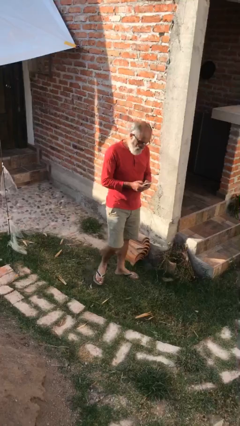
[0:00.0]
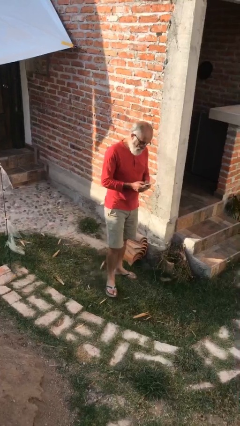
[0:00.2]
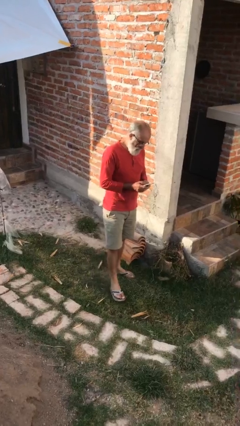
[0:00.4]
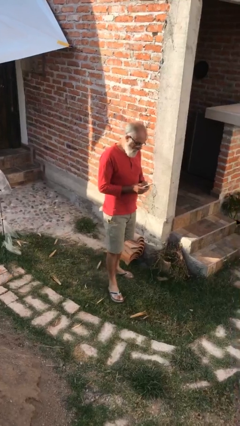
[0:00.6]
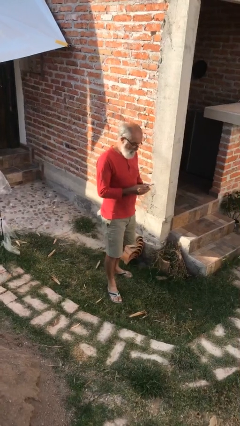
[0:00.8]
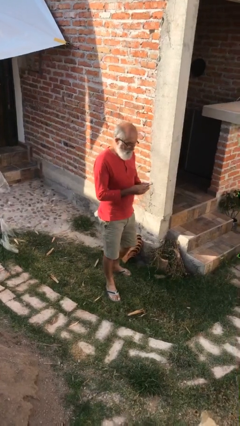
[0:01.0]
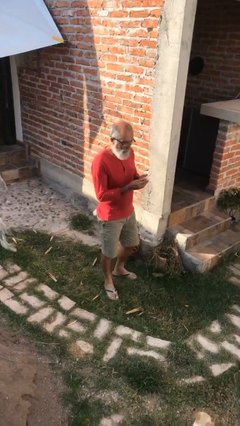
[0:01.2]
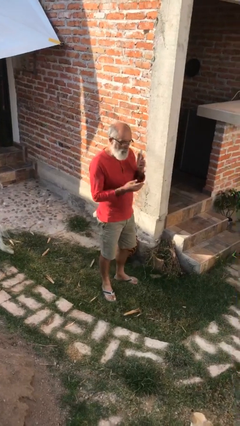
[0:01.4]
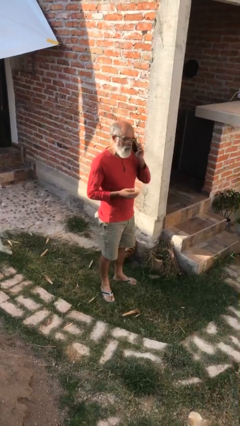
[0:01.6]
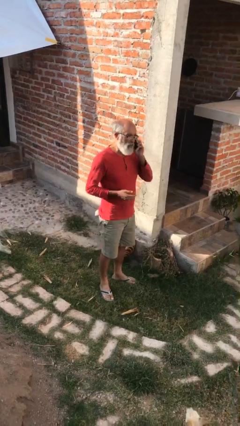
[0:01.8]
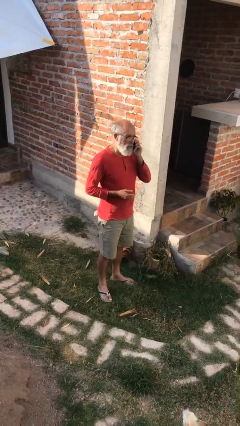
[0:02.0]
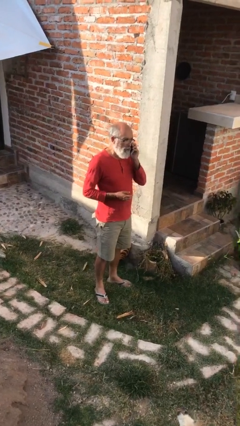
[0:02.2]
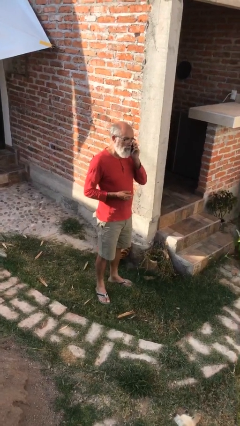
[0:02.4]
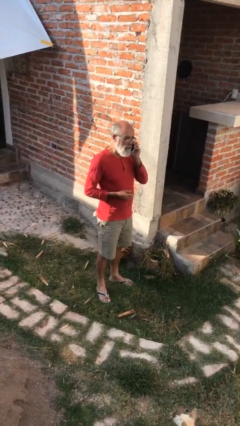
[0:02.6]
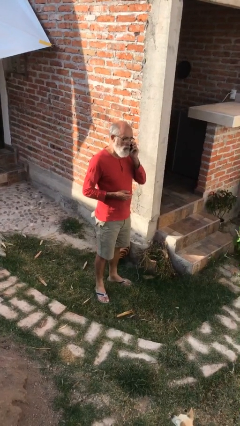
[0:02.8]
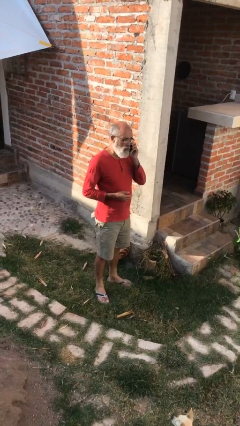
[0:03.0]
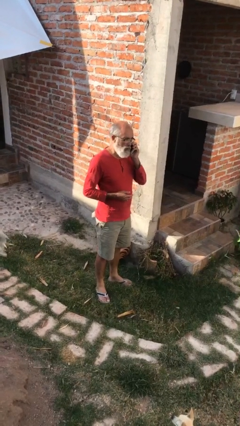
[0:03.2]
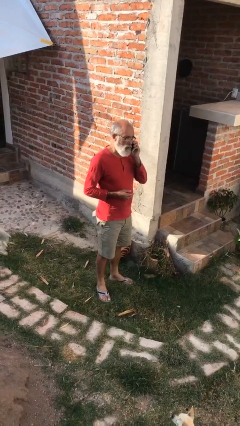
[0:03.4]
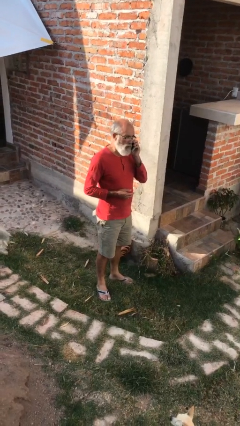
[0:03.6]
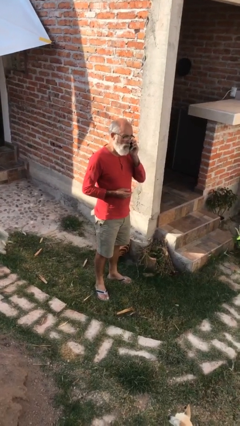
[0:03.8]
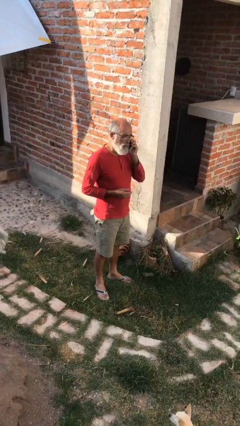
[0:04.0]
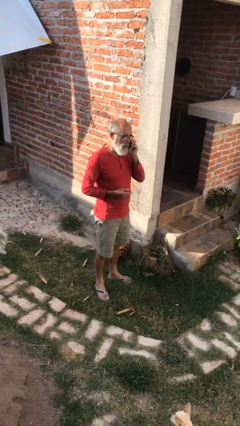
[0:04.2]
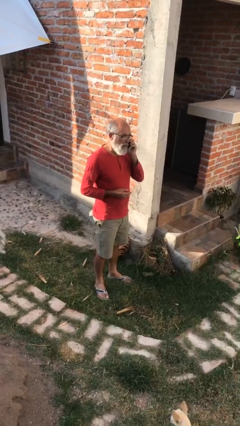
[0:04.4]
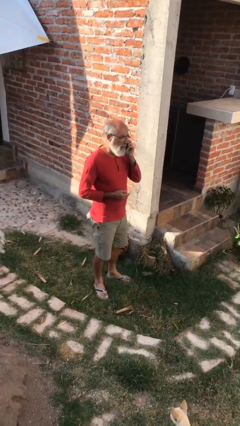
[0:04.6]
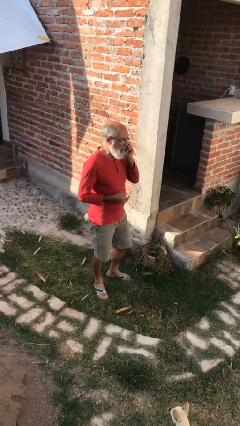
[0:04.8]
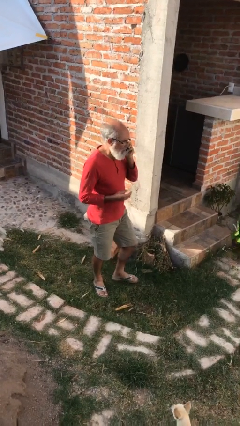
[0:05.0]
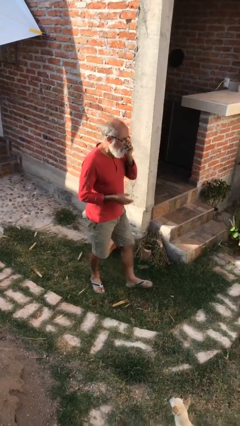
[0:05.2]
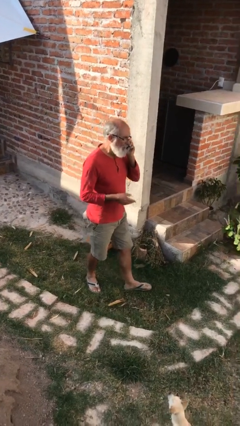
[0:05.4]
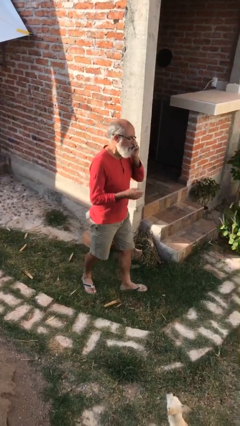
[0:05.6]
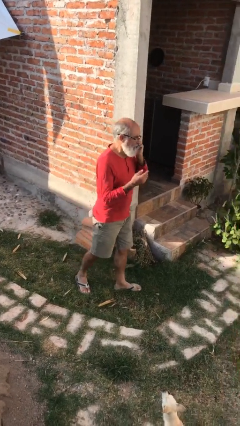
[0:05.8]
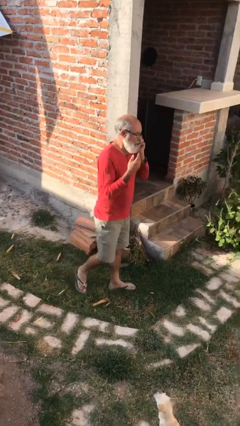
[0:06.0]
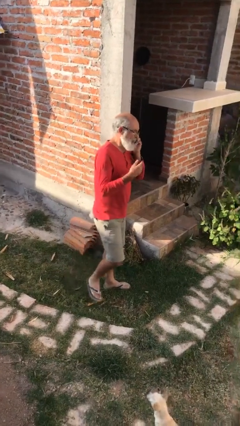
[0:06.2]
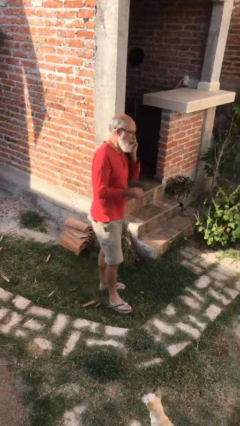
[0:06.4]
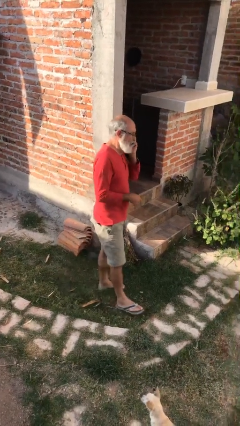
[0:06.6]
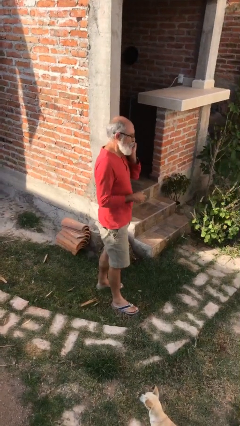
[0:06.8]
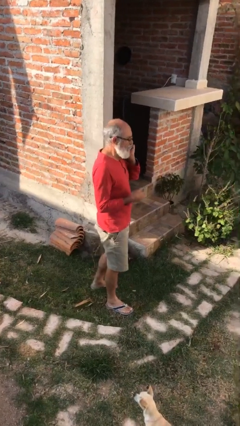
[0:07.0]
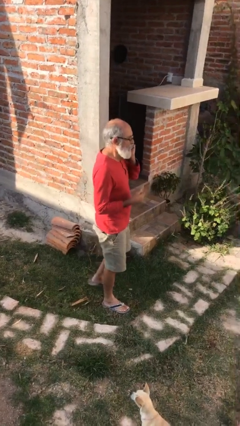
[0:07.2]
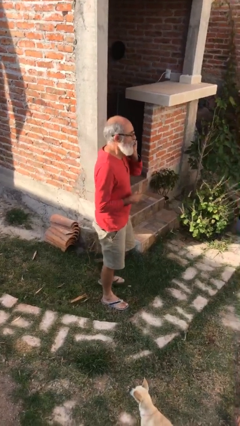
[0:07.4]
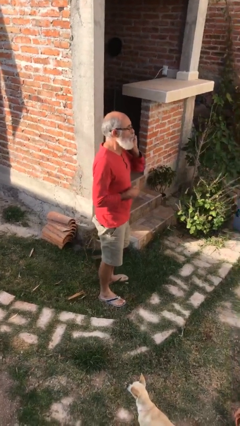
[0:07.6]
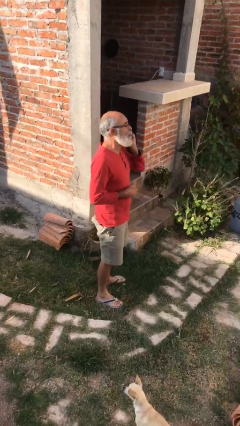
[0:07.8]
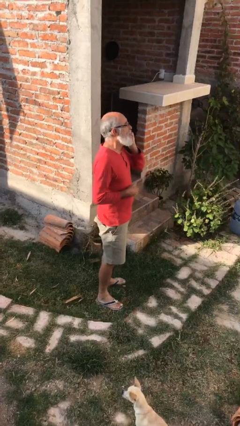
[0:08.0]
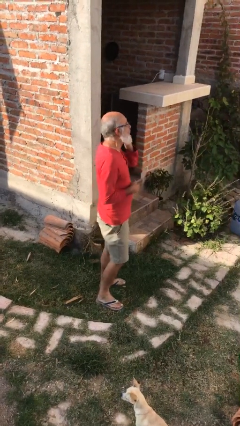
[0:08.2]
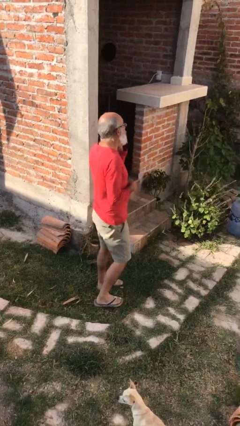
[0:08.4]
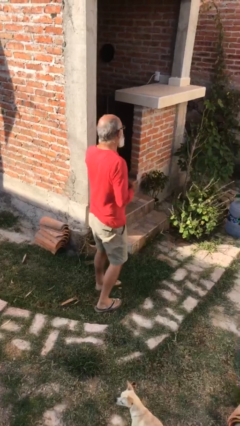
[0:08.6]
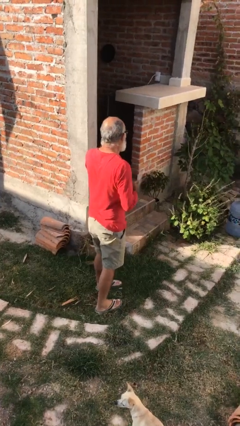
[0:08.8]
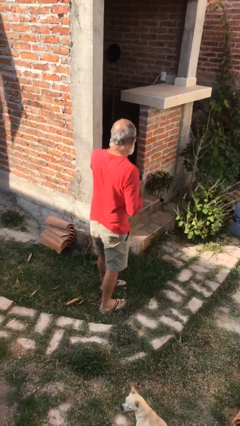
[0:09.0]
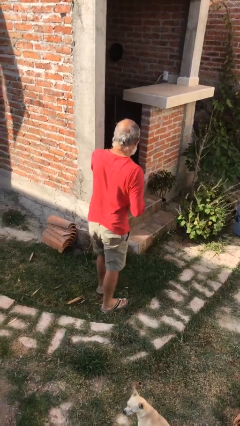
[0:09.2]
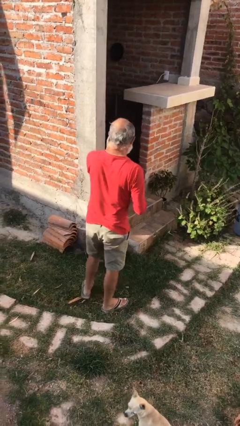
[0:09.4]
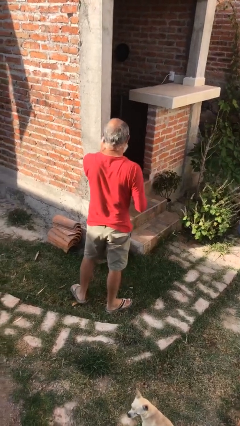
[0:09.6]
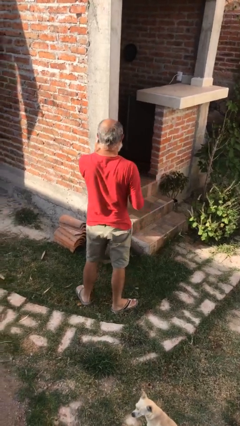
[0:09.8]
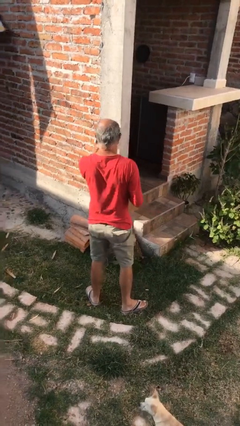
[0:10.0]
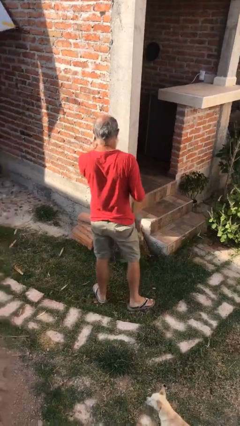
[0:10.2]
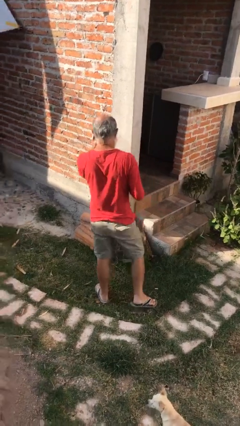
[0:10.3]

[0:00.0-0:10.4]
person talks on phone

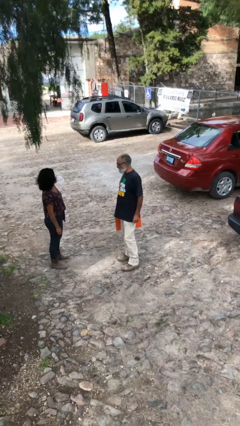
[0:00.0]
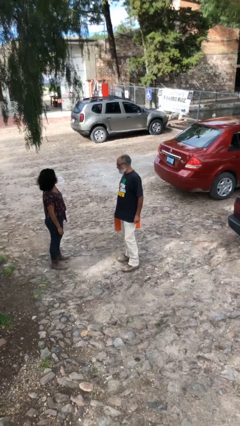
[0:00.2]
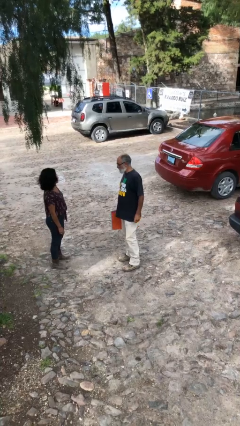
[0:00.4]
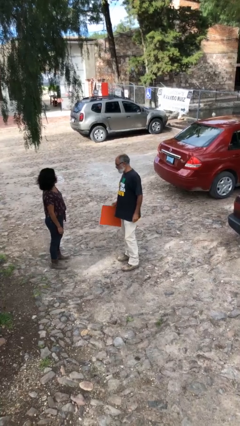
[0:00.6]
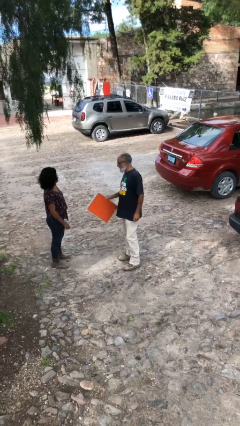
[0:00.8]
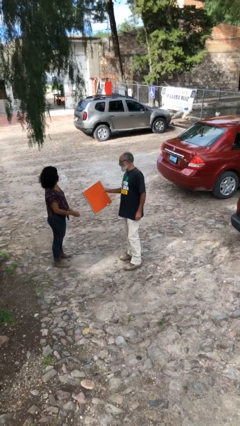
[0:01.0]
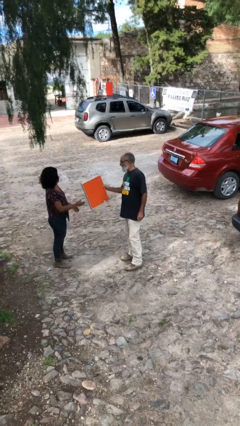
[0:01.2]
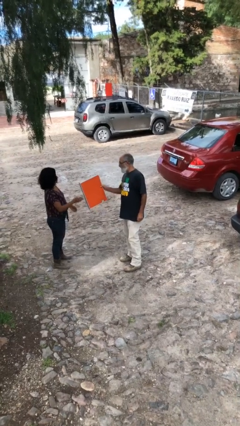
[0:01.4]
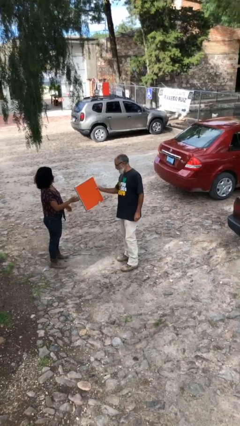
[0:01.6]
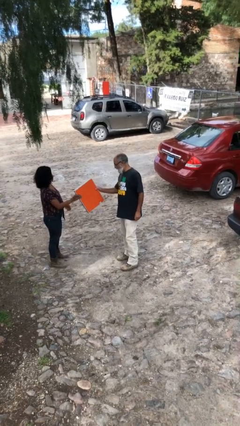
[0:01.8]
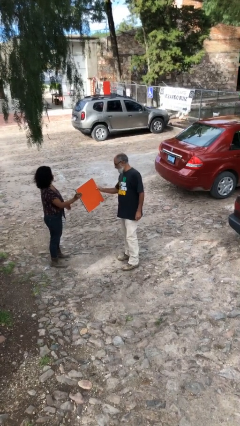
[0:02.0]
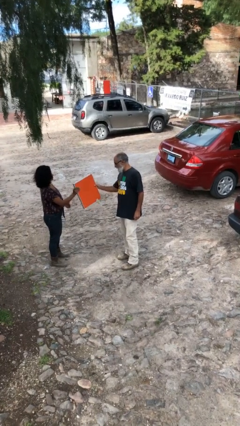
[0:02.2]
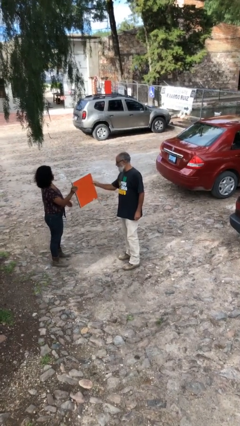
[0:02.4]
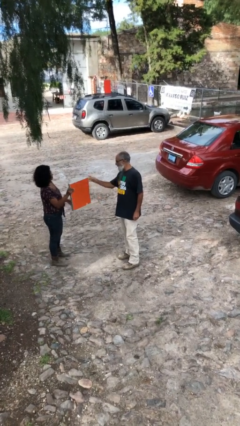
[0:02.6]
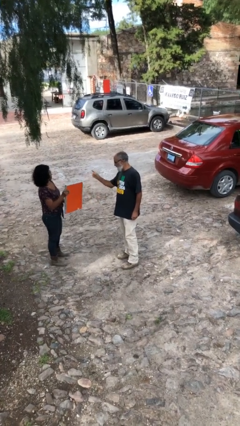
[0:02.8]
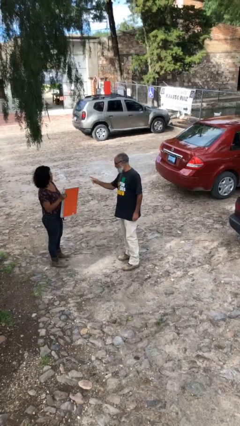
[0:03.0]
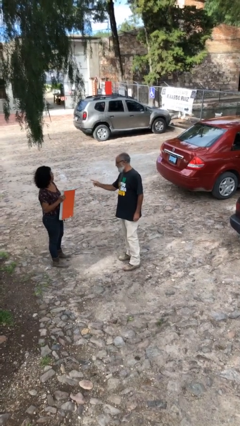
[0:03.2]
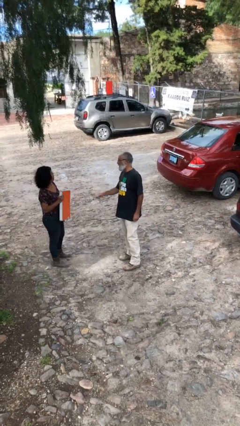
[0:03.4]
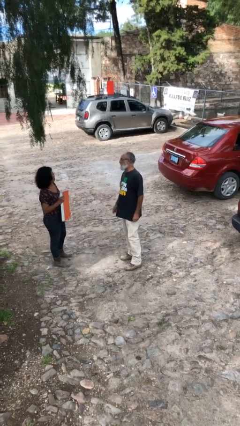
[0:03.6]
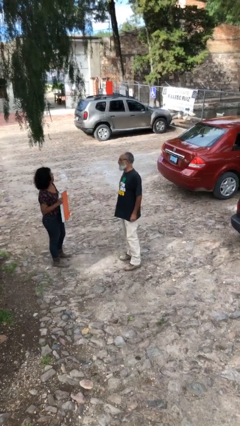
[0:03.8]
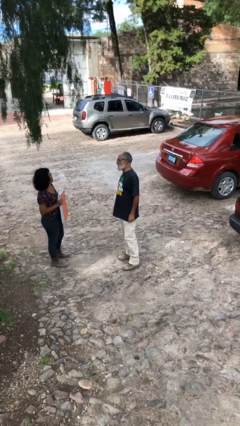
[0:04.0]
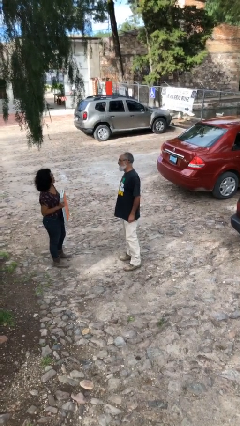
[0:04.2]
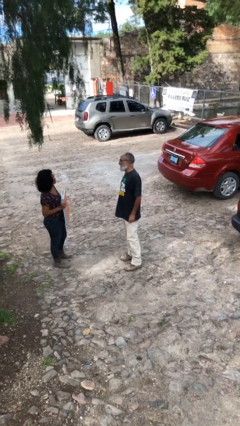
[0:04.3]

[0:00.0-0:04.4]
person transfers object to person

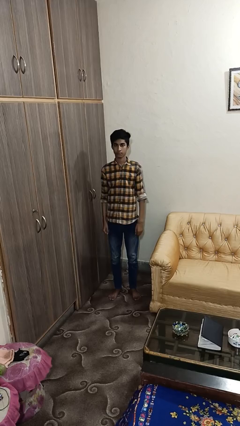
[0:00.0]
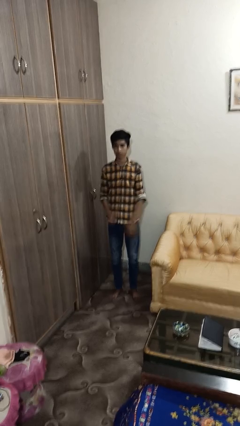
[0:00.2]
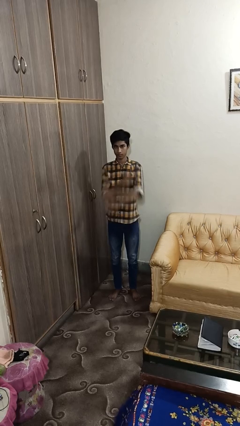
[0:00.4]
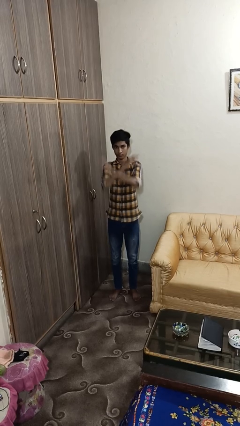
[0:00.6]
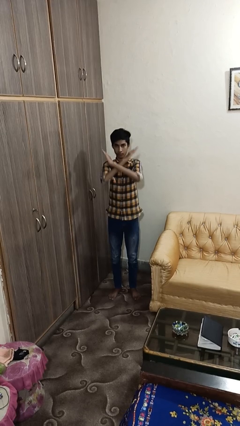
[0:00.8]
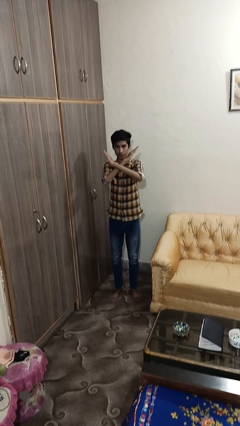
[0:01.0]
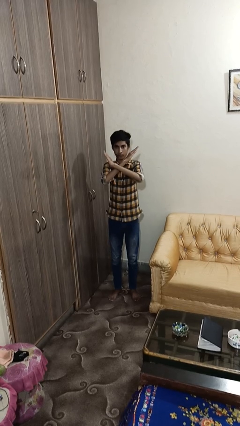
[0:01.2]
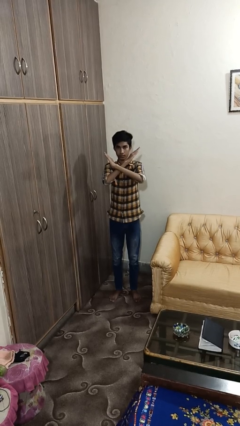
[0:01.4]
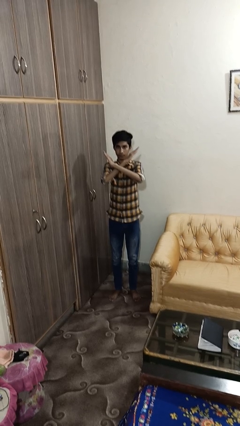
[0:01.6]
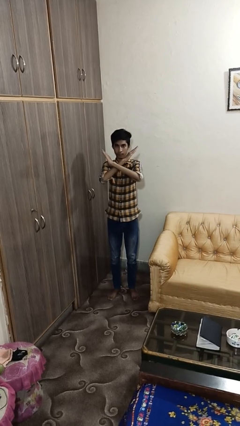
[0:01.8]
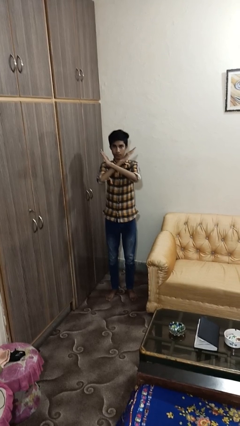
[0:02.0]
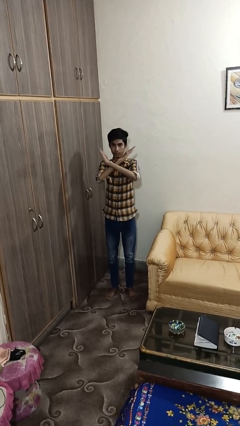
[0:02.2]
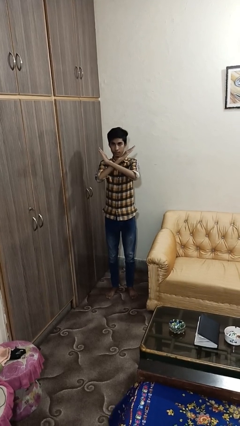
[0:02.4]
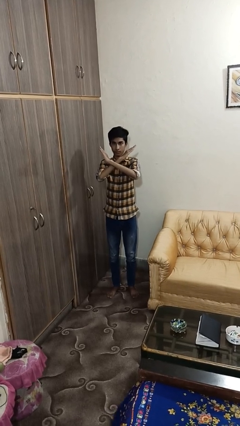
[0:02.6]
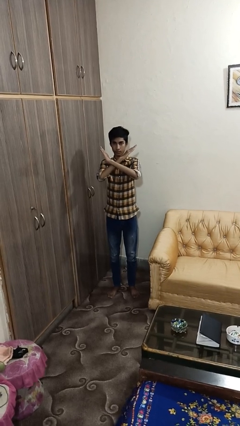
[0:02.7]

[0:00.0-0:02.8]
person gestures arms x

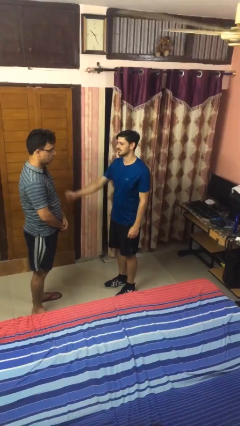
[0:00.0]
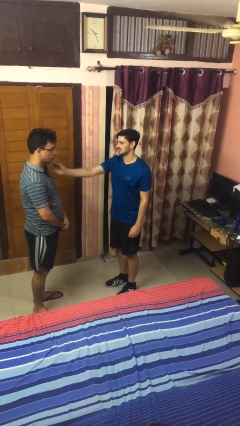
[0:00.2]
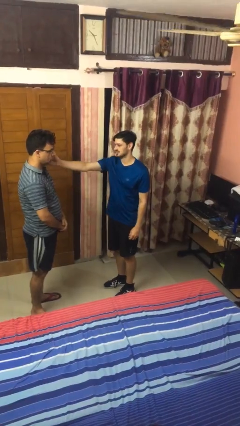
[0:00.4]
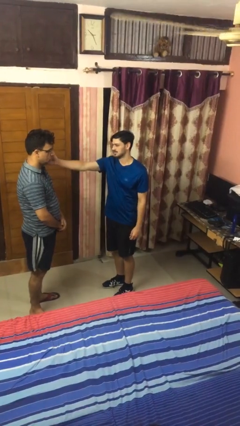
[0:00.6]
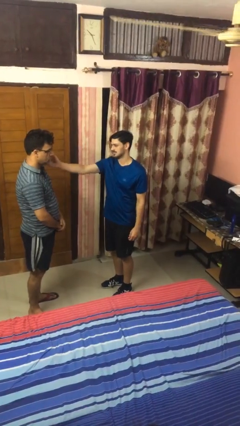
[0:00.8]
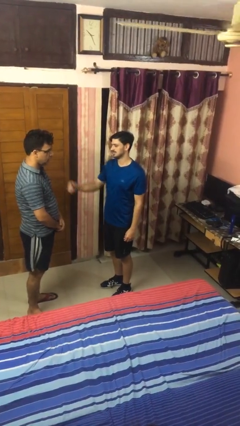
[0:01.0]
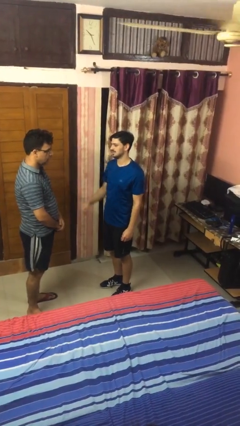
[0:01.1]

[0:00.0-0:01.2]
person touches face of person
